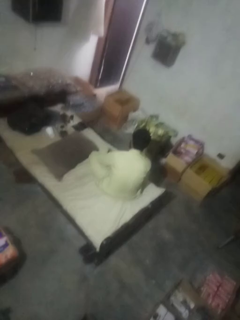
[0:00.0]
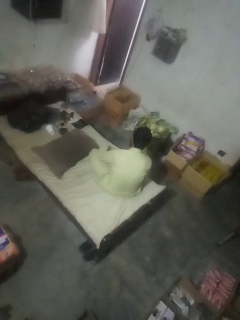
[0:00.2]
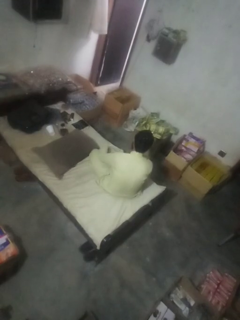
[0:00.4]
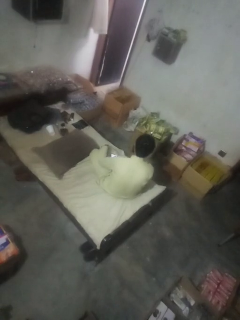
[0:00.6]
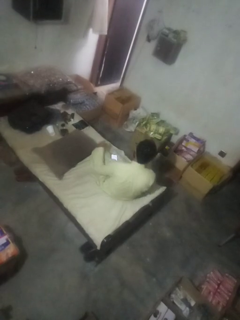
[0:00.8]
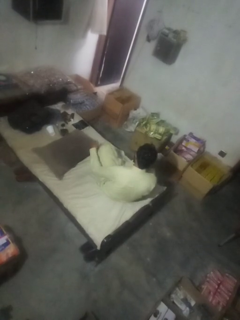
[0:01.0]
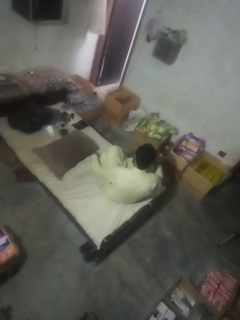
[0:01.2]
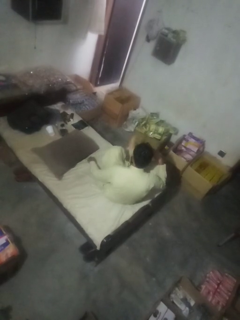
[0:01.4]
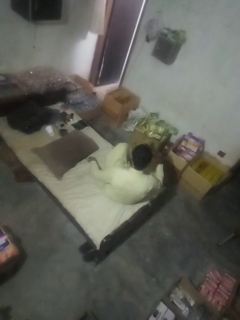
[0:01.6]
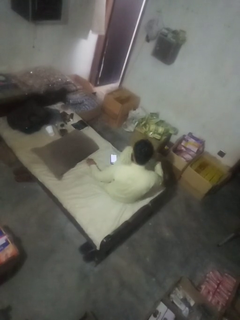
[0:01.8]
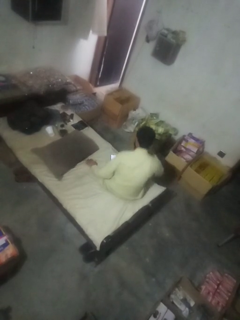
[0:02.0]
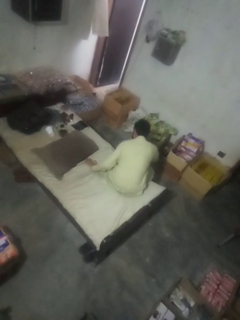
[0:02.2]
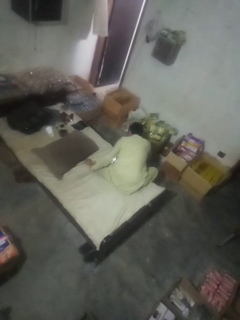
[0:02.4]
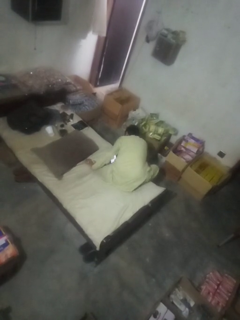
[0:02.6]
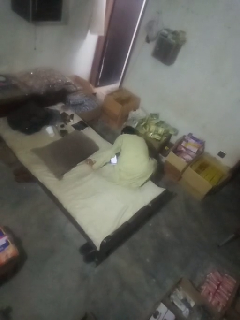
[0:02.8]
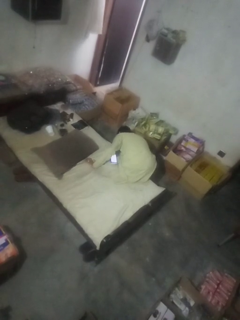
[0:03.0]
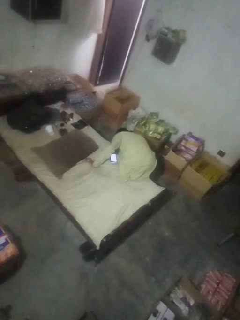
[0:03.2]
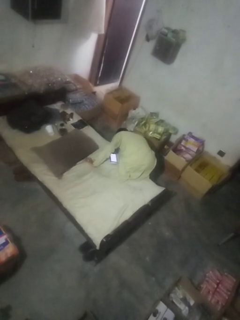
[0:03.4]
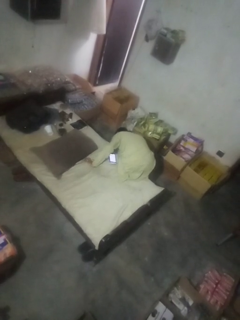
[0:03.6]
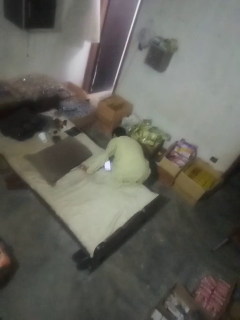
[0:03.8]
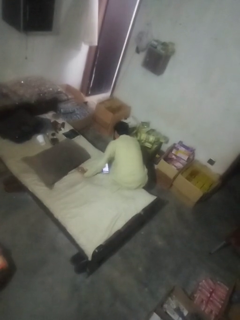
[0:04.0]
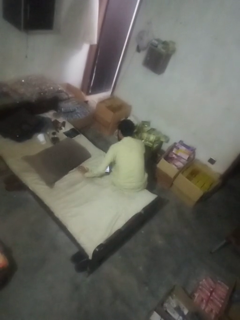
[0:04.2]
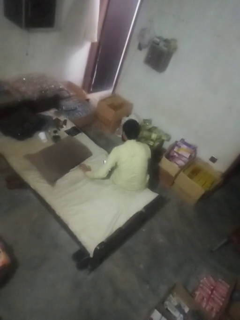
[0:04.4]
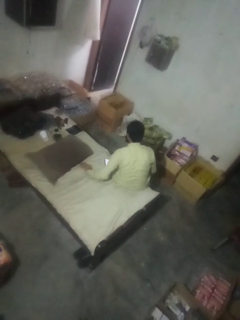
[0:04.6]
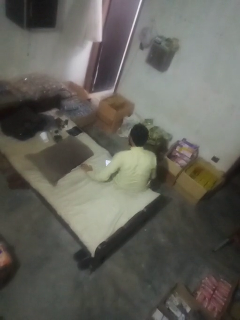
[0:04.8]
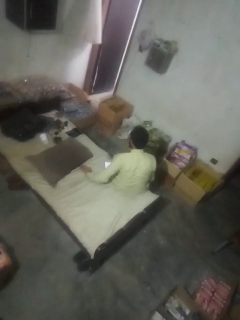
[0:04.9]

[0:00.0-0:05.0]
person searches under couch

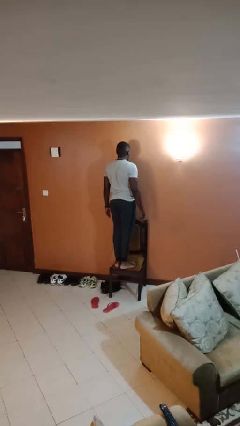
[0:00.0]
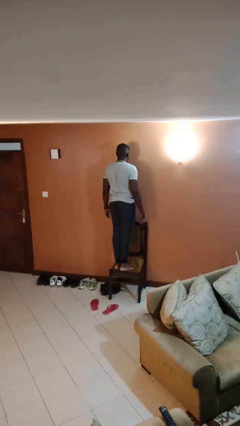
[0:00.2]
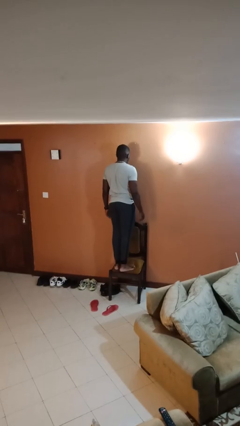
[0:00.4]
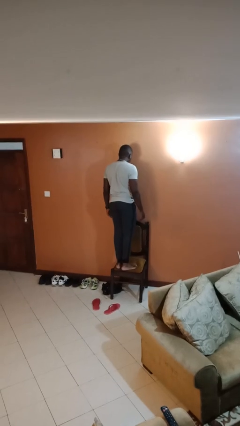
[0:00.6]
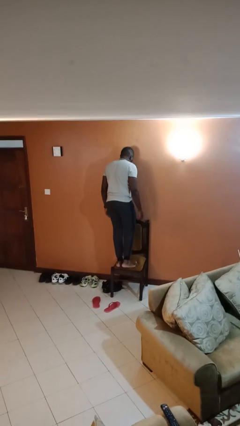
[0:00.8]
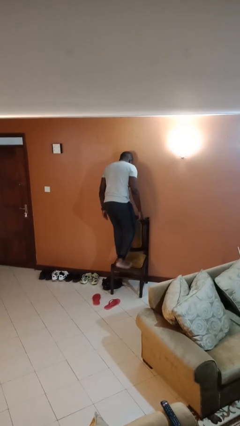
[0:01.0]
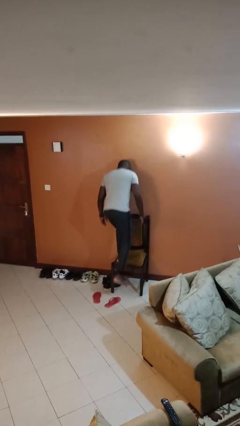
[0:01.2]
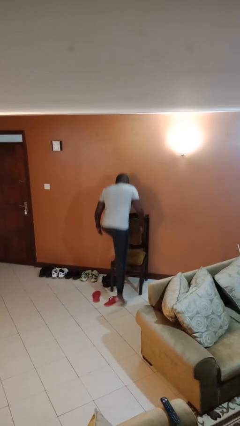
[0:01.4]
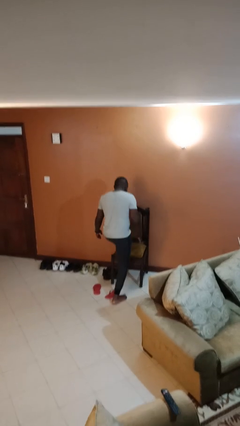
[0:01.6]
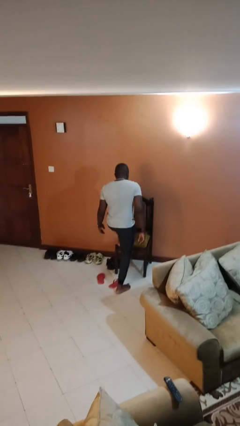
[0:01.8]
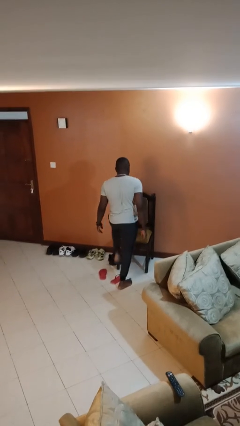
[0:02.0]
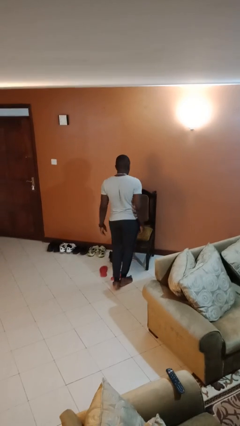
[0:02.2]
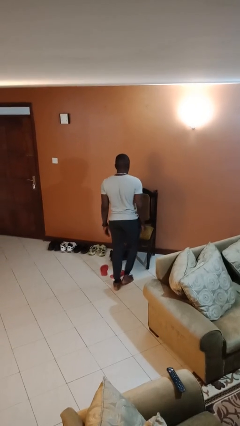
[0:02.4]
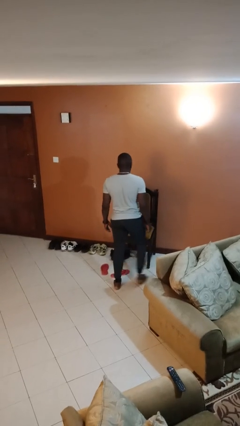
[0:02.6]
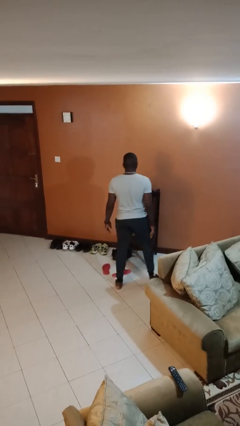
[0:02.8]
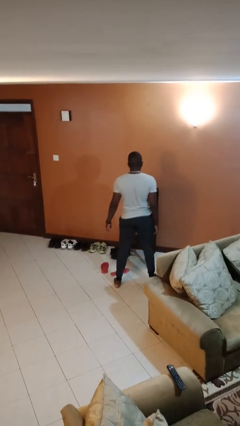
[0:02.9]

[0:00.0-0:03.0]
person climbs off chair

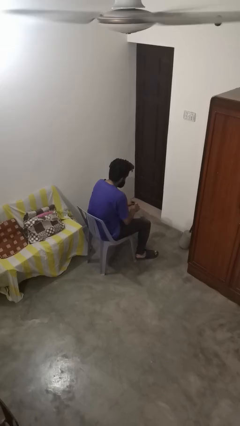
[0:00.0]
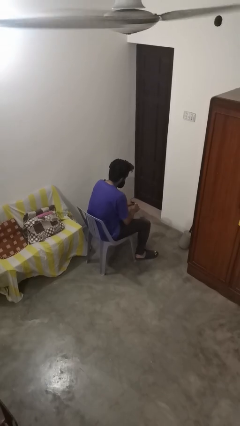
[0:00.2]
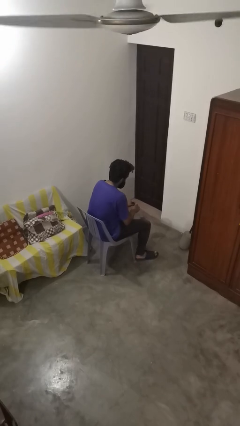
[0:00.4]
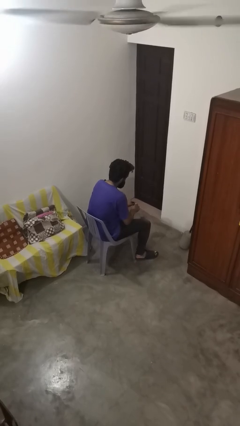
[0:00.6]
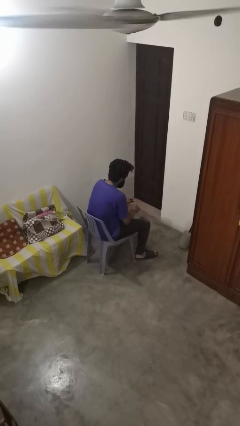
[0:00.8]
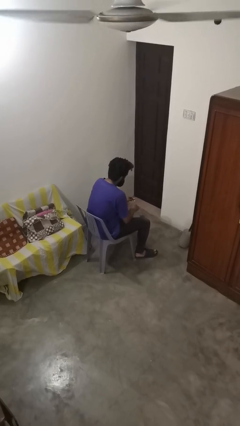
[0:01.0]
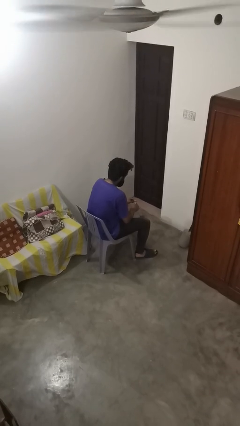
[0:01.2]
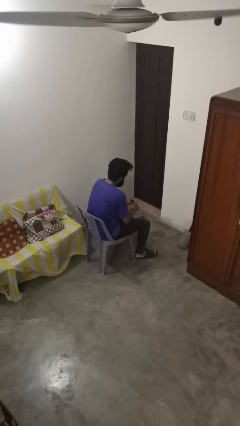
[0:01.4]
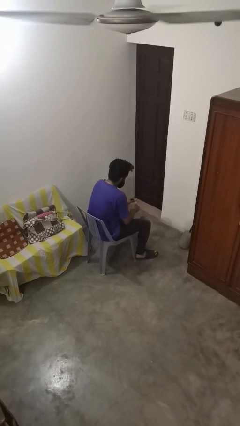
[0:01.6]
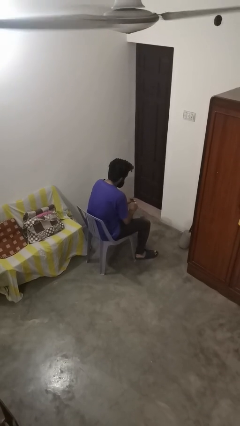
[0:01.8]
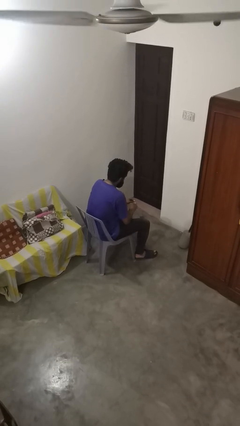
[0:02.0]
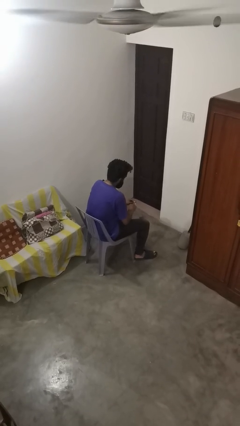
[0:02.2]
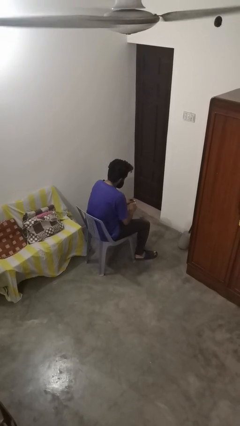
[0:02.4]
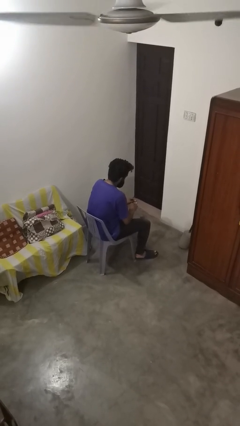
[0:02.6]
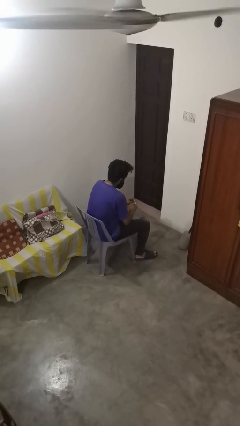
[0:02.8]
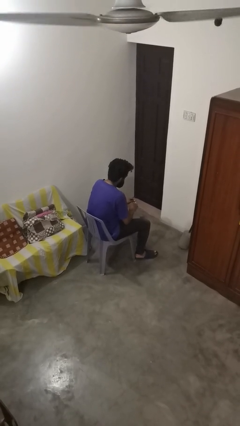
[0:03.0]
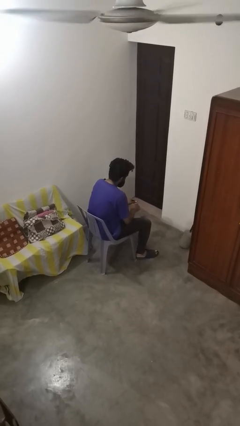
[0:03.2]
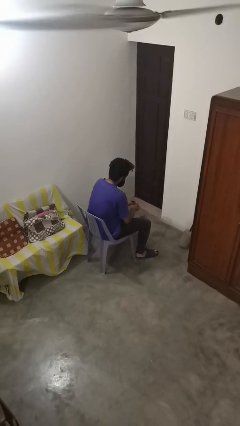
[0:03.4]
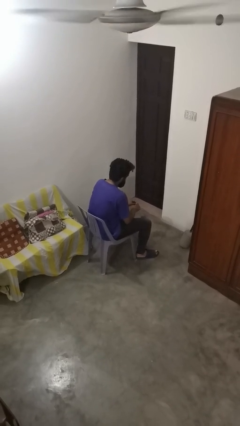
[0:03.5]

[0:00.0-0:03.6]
person paints fingernails

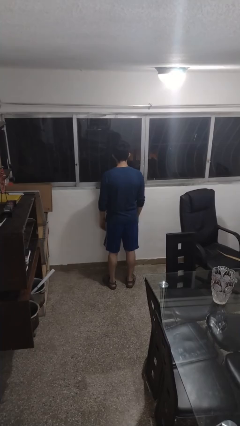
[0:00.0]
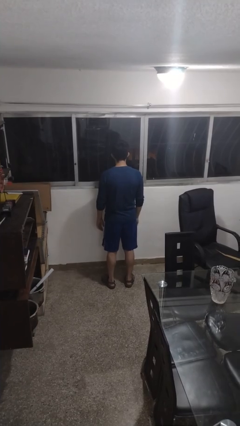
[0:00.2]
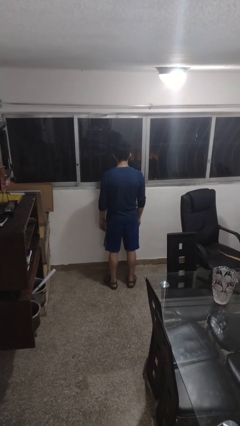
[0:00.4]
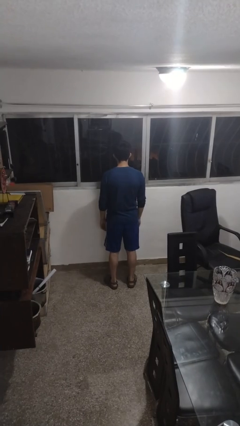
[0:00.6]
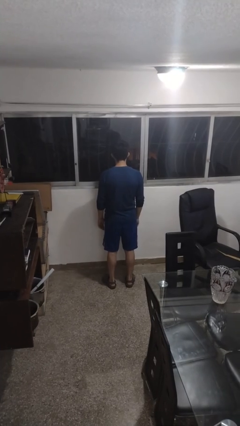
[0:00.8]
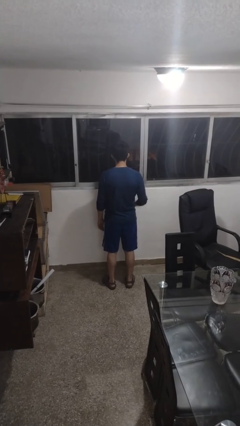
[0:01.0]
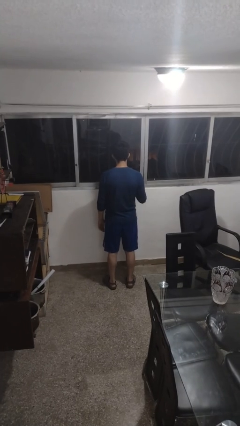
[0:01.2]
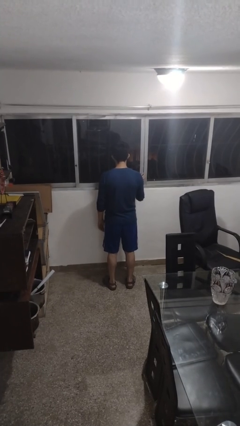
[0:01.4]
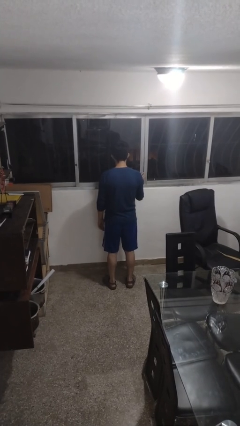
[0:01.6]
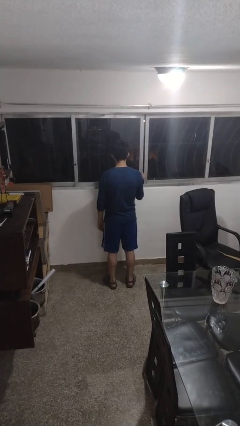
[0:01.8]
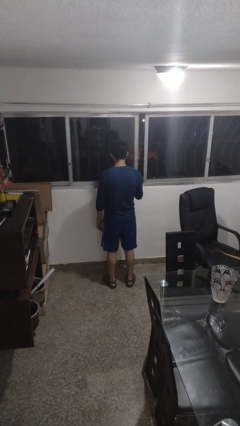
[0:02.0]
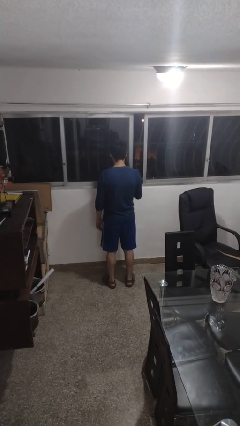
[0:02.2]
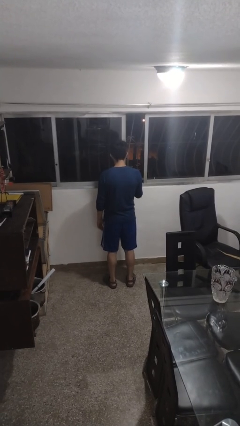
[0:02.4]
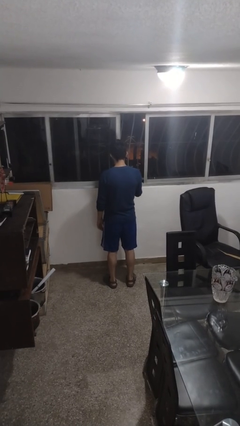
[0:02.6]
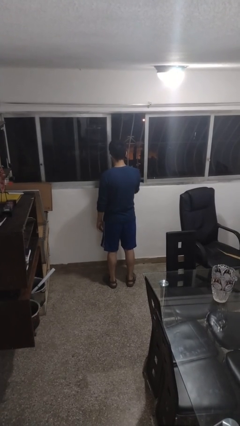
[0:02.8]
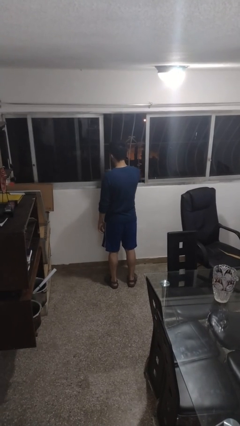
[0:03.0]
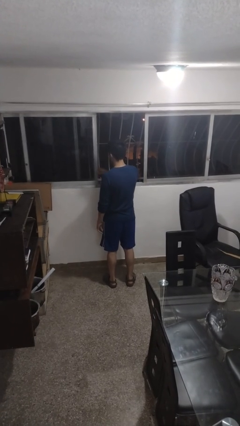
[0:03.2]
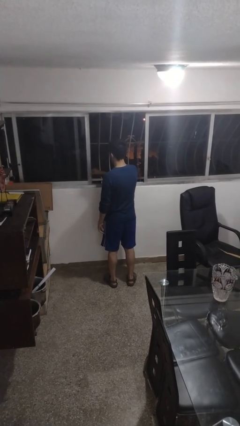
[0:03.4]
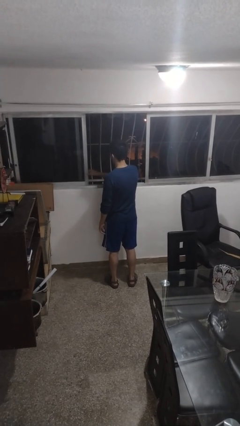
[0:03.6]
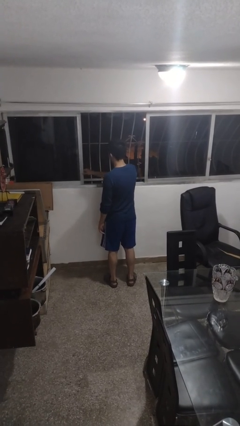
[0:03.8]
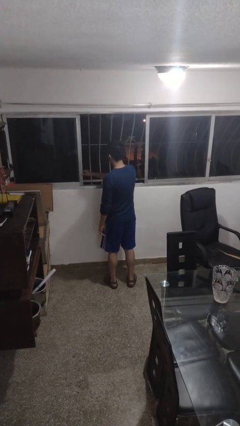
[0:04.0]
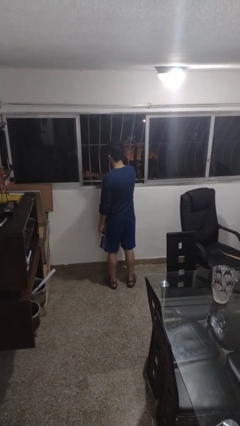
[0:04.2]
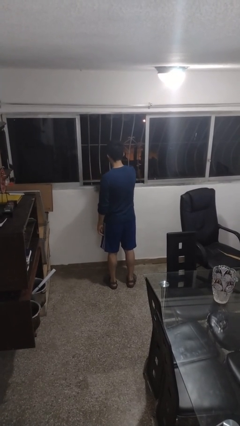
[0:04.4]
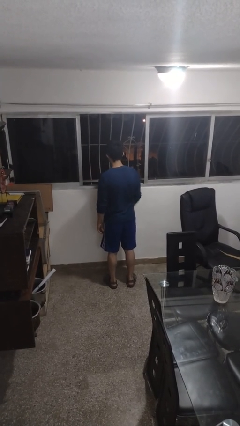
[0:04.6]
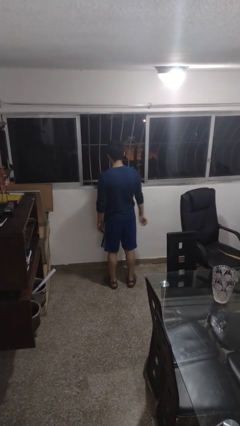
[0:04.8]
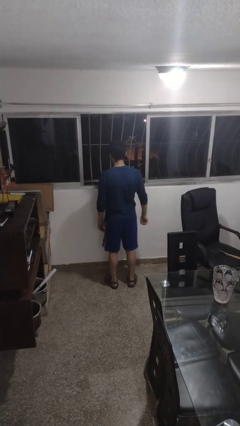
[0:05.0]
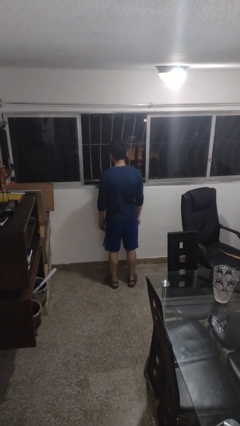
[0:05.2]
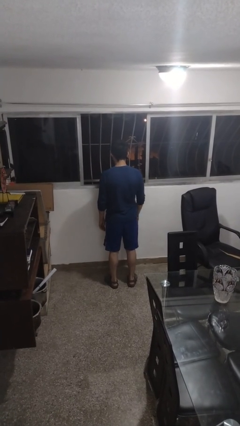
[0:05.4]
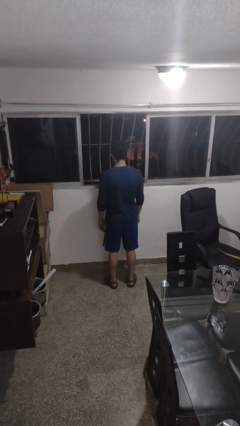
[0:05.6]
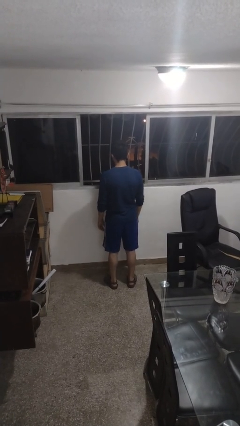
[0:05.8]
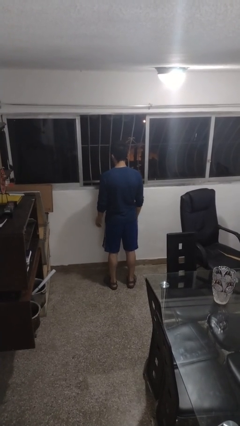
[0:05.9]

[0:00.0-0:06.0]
person opens home window

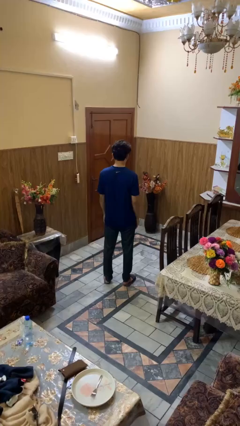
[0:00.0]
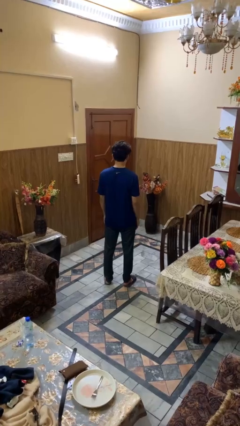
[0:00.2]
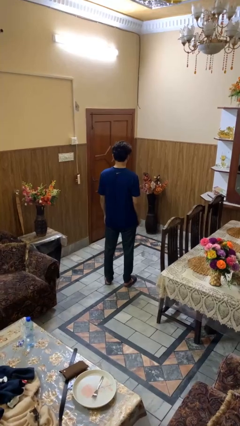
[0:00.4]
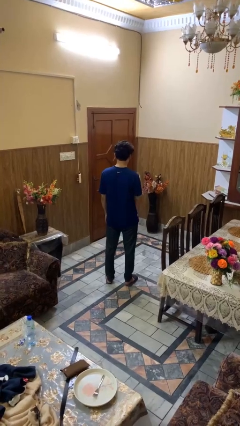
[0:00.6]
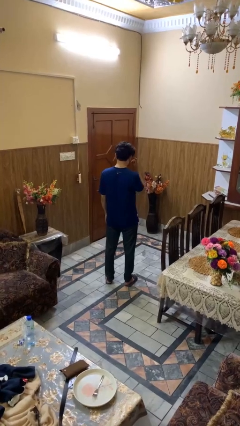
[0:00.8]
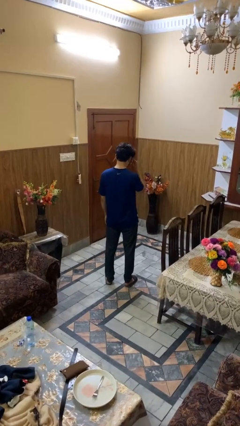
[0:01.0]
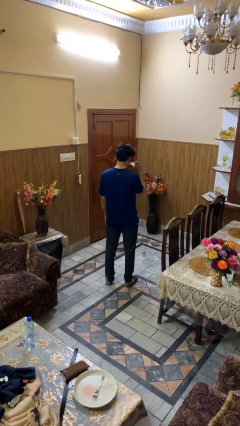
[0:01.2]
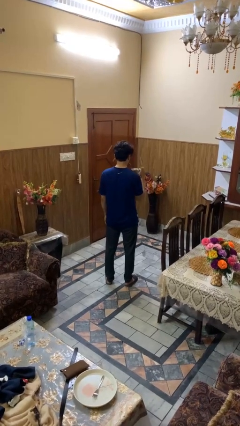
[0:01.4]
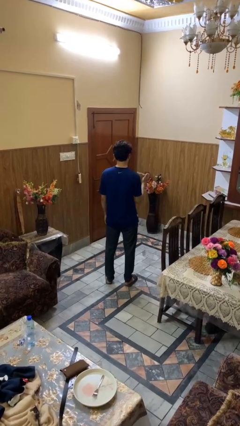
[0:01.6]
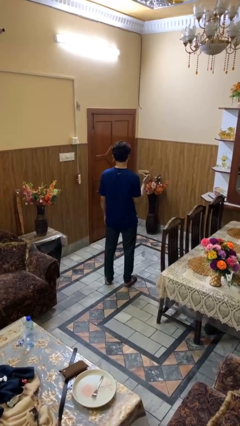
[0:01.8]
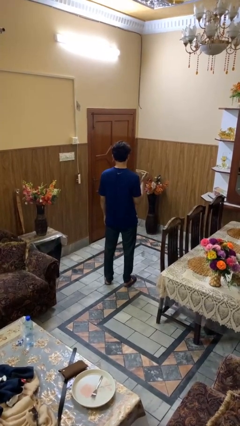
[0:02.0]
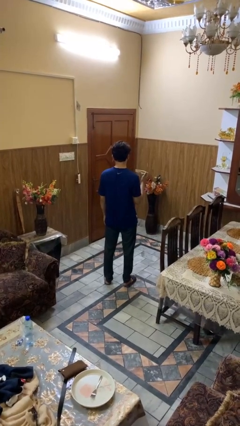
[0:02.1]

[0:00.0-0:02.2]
person takes off sunglasses
